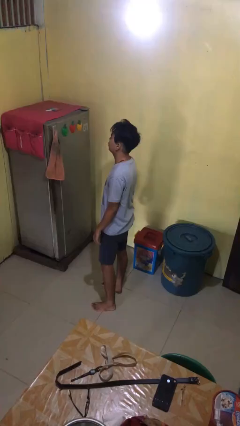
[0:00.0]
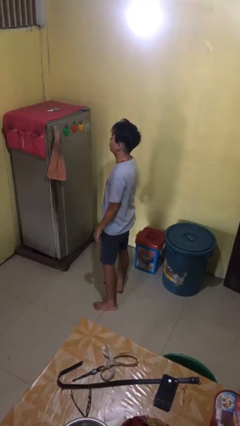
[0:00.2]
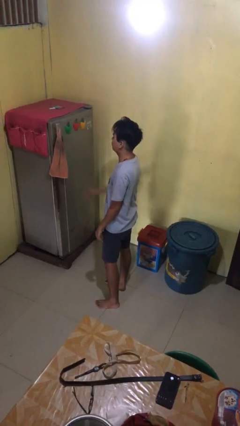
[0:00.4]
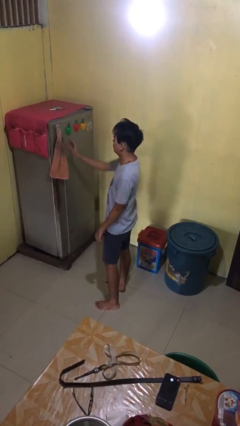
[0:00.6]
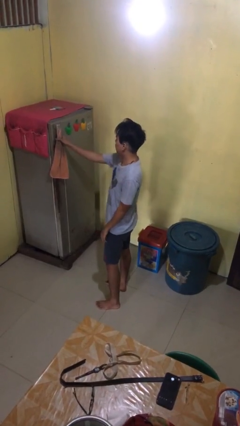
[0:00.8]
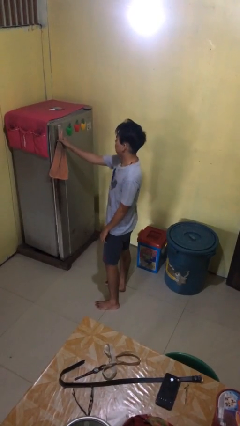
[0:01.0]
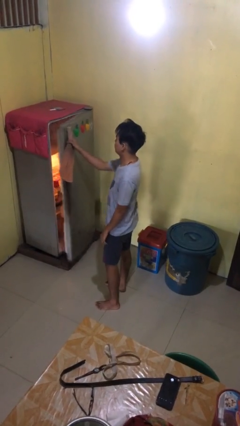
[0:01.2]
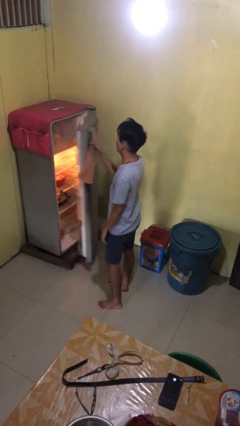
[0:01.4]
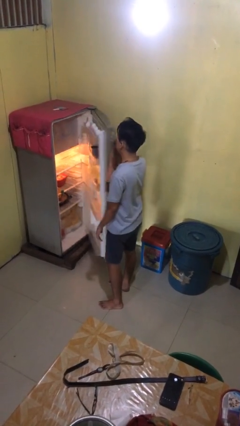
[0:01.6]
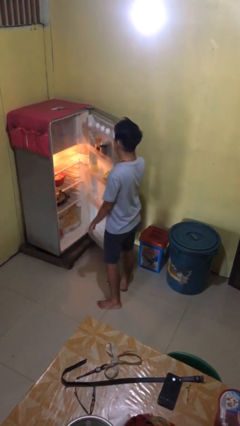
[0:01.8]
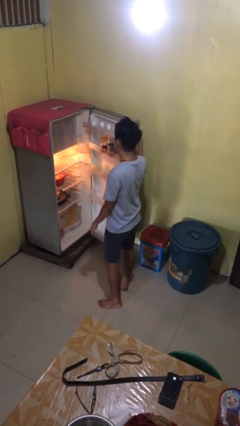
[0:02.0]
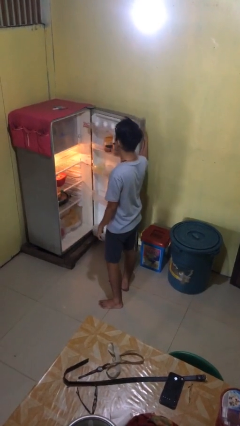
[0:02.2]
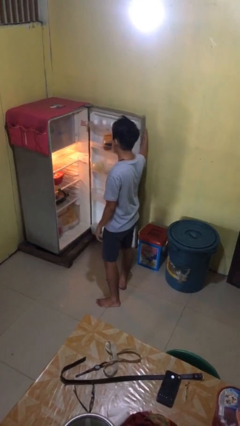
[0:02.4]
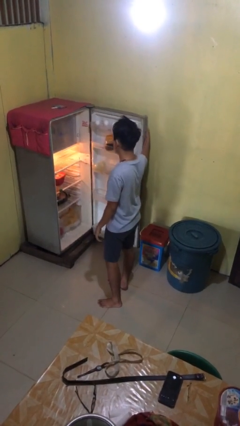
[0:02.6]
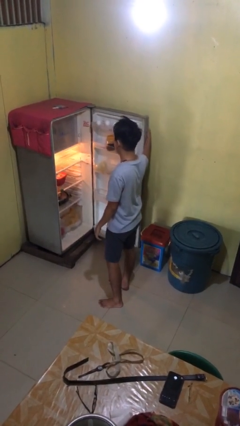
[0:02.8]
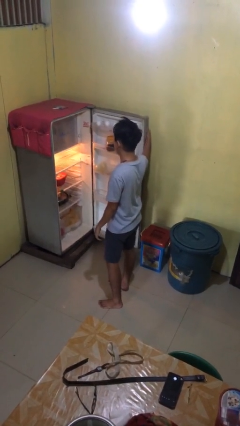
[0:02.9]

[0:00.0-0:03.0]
person opens refrigerator

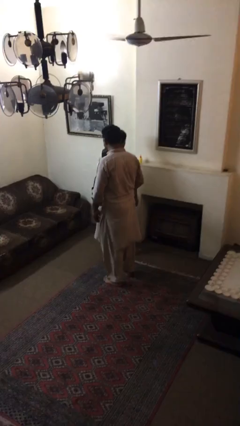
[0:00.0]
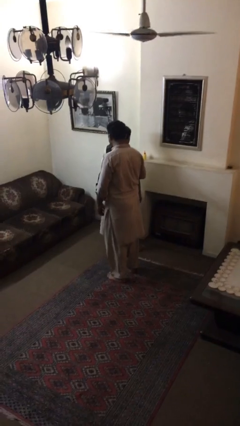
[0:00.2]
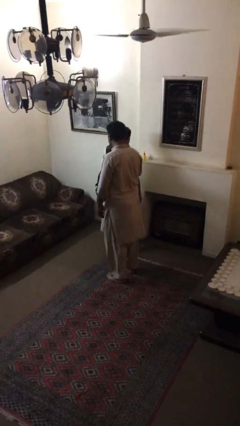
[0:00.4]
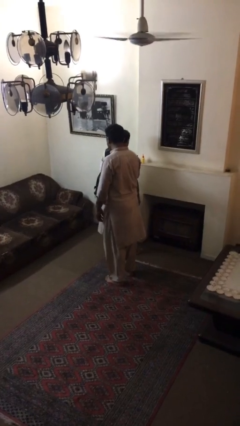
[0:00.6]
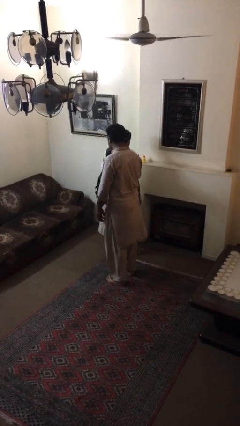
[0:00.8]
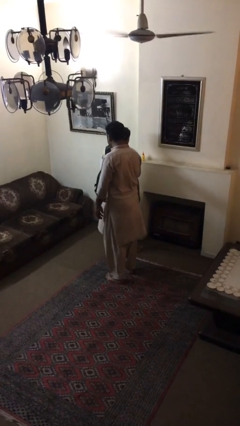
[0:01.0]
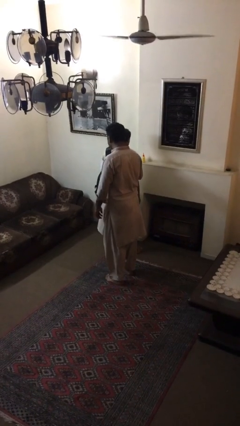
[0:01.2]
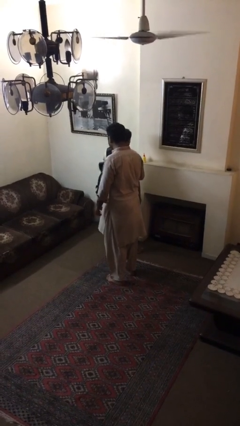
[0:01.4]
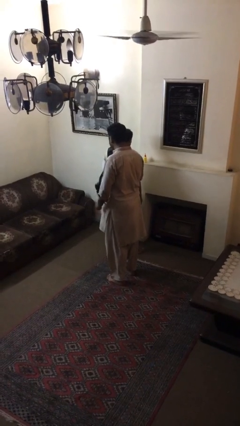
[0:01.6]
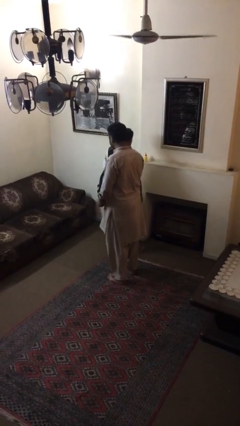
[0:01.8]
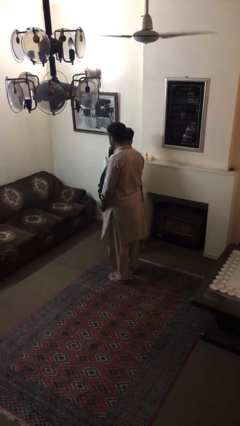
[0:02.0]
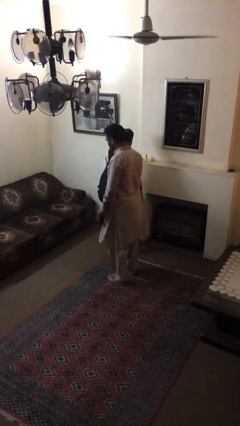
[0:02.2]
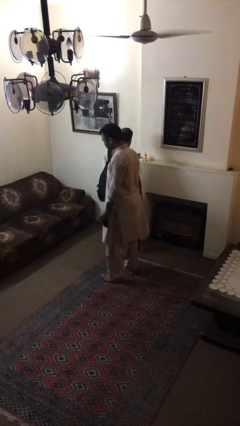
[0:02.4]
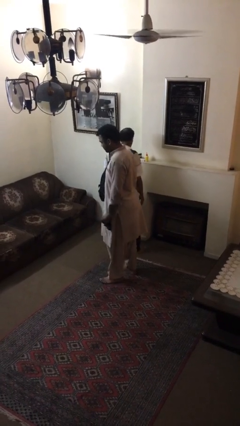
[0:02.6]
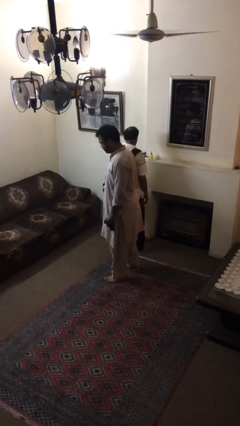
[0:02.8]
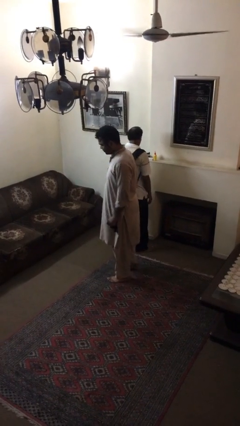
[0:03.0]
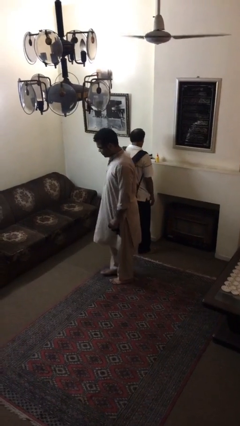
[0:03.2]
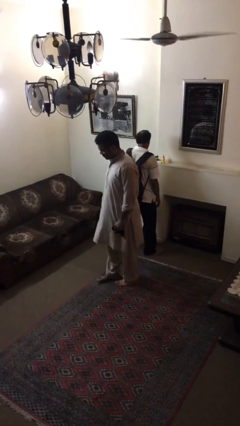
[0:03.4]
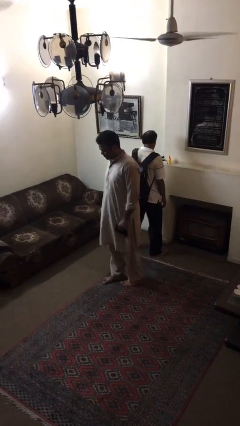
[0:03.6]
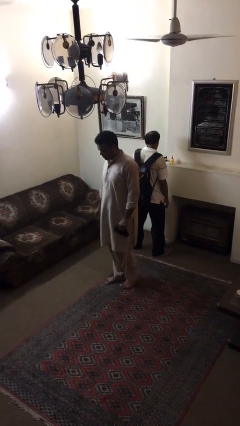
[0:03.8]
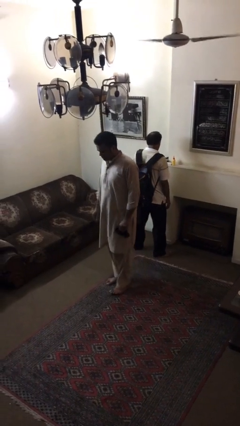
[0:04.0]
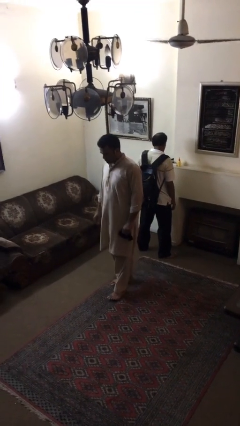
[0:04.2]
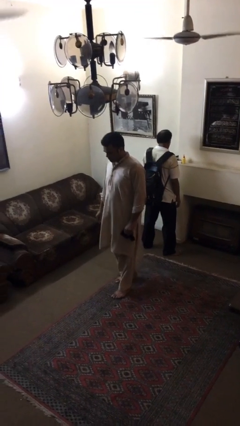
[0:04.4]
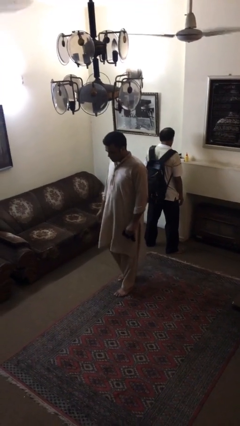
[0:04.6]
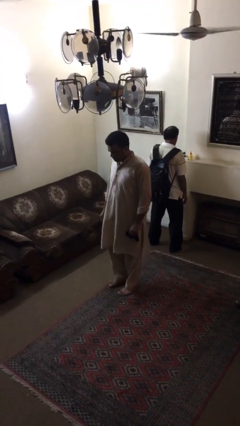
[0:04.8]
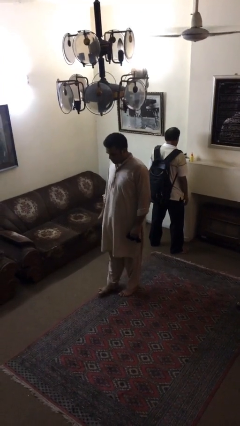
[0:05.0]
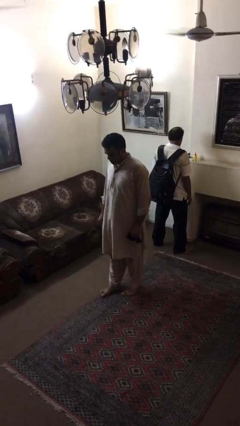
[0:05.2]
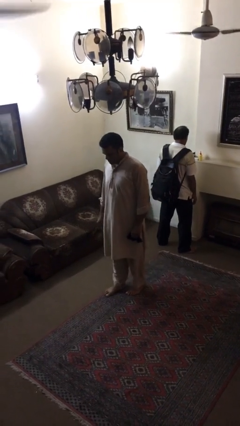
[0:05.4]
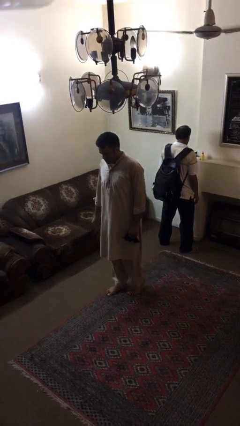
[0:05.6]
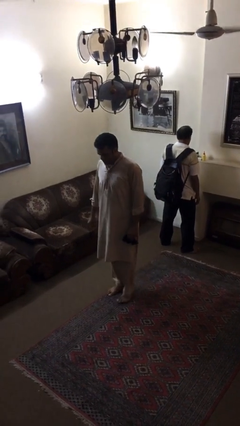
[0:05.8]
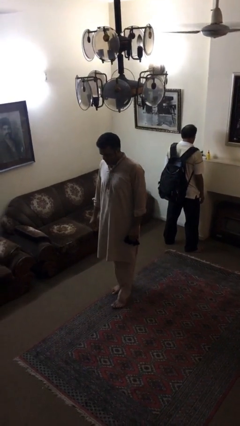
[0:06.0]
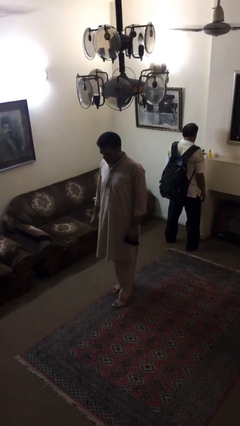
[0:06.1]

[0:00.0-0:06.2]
person steals object from person

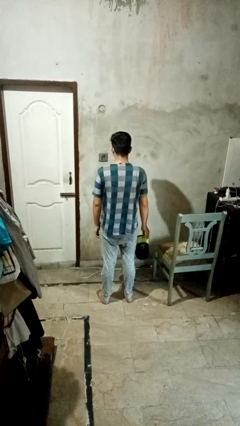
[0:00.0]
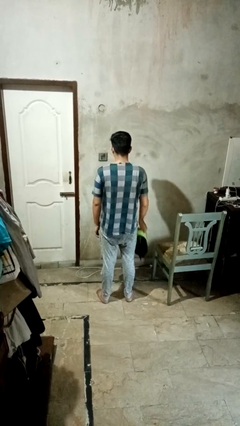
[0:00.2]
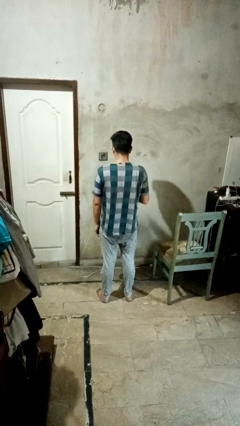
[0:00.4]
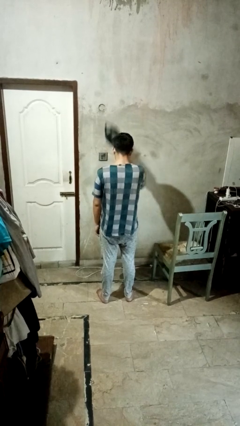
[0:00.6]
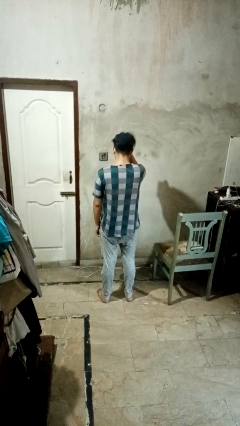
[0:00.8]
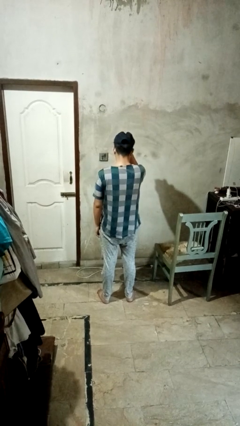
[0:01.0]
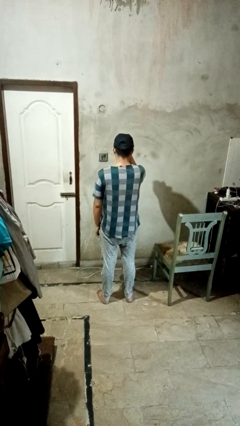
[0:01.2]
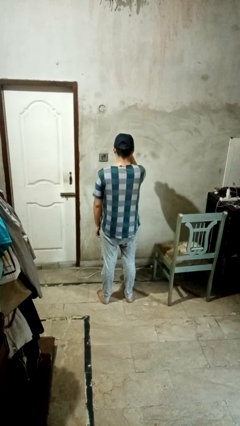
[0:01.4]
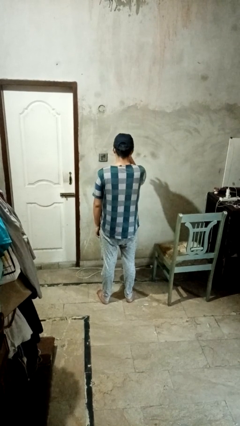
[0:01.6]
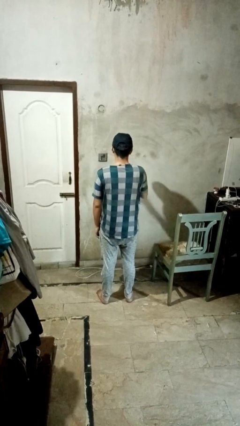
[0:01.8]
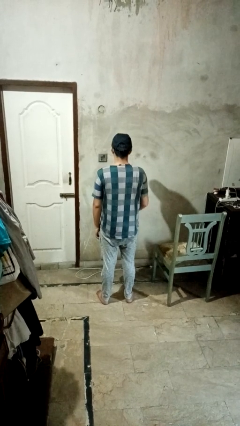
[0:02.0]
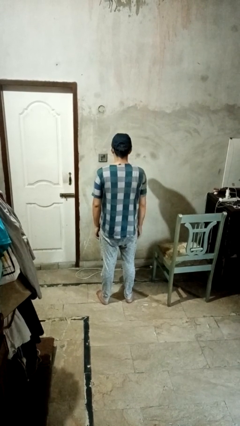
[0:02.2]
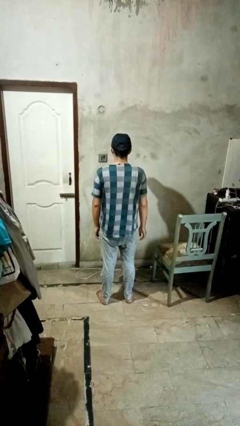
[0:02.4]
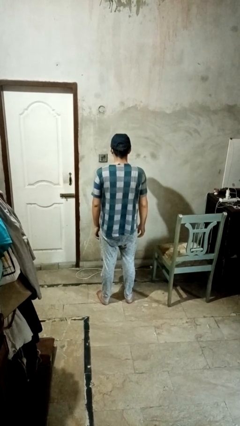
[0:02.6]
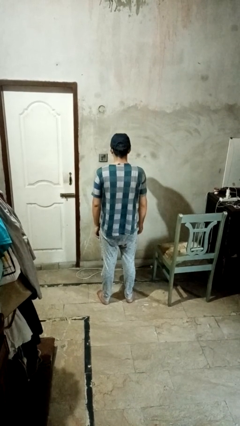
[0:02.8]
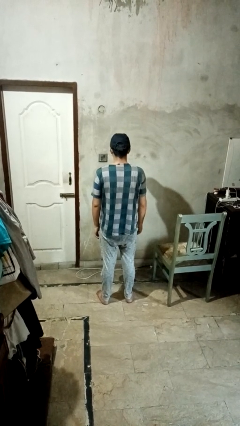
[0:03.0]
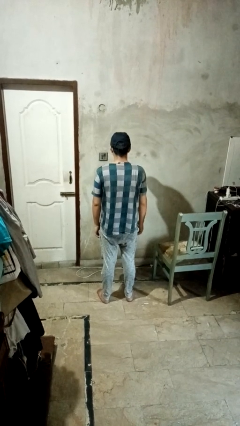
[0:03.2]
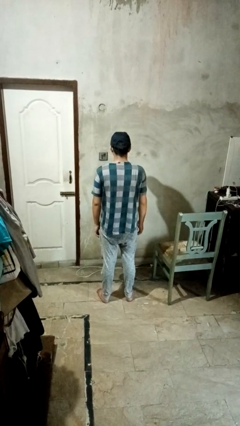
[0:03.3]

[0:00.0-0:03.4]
person puts on hat

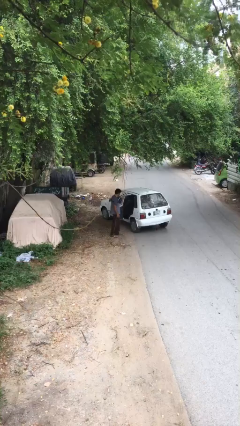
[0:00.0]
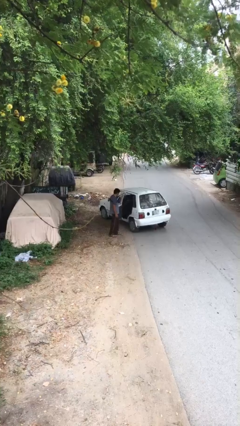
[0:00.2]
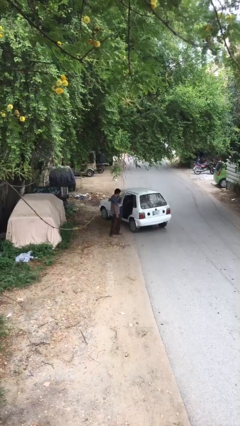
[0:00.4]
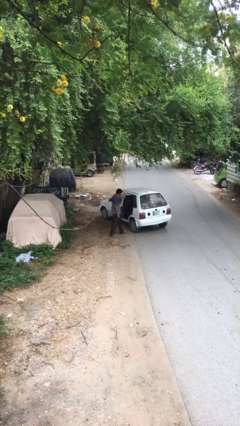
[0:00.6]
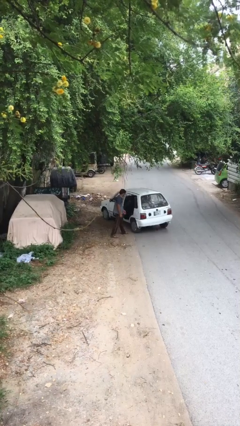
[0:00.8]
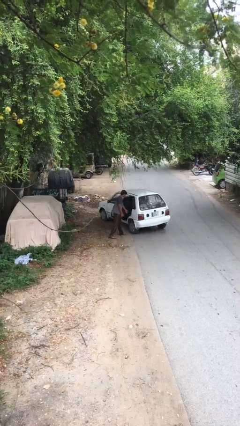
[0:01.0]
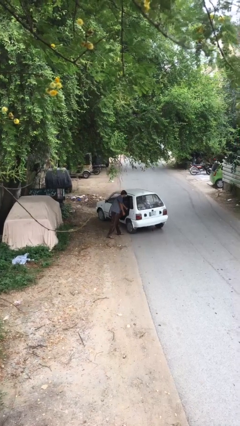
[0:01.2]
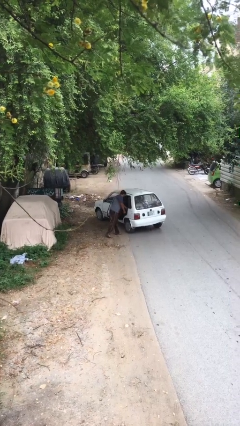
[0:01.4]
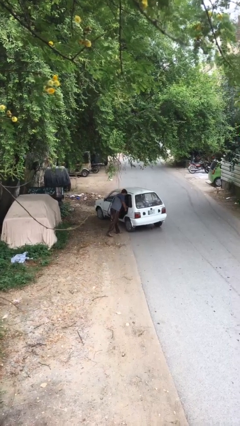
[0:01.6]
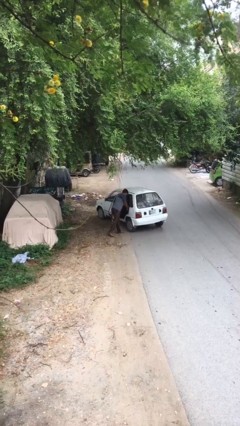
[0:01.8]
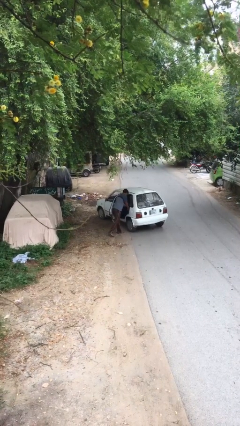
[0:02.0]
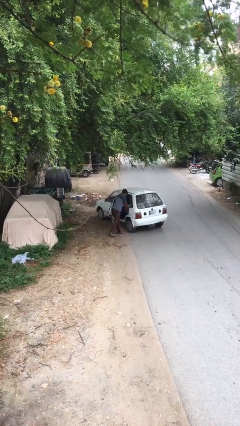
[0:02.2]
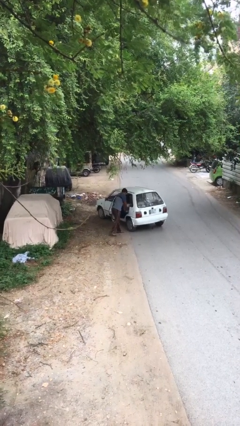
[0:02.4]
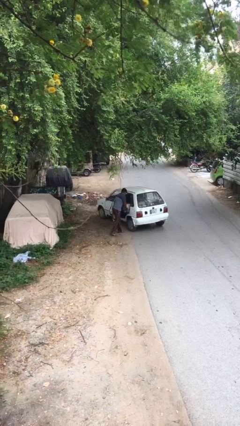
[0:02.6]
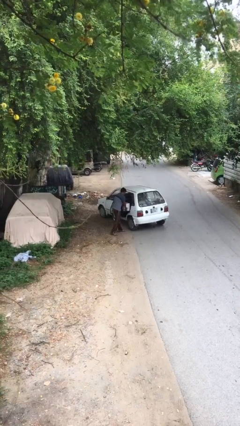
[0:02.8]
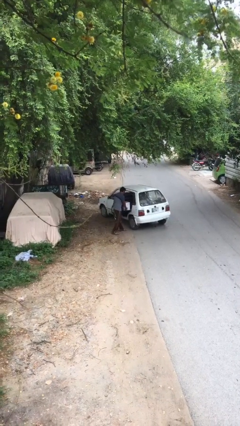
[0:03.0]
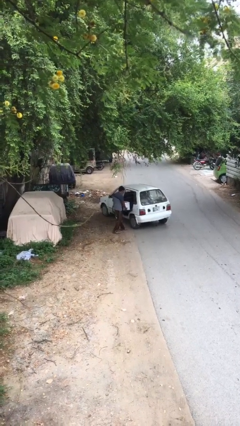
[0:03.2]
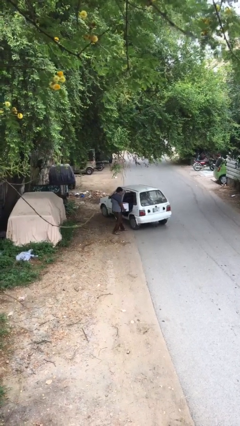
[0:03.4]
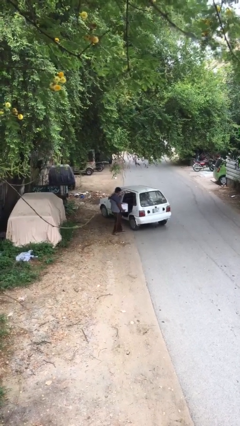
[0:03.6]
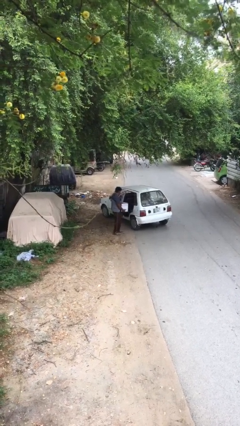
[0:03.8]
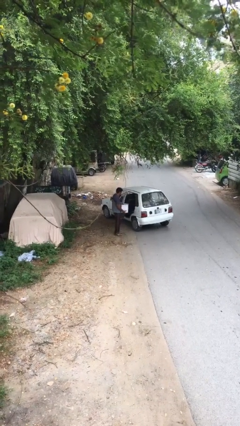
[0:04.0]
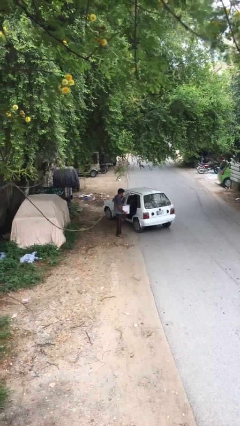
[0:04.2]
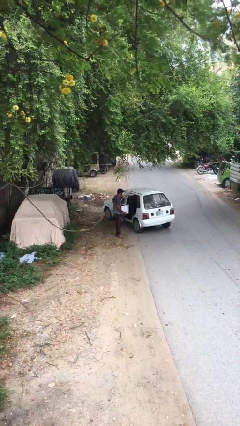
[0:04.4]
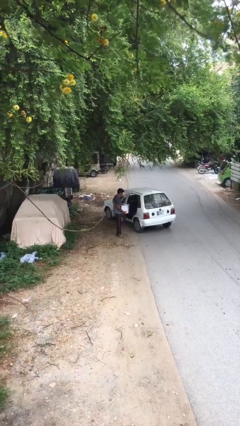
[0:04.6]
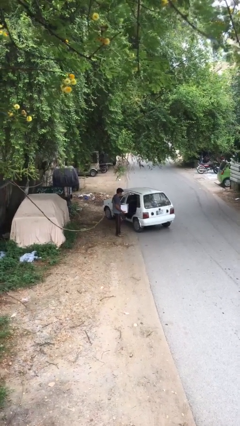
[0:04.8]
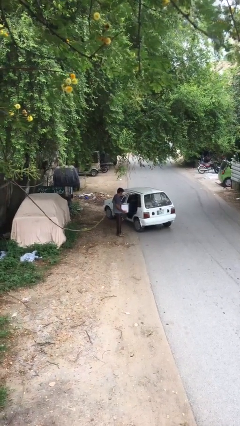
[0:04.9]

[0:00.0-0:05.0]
person unloads car

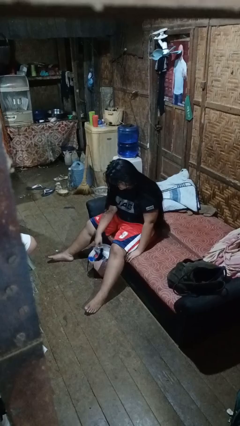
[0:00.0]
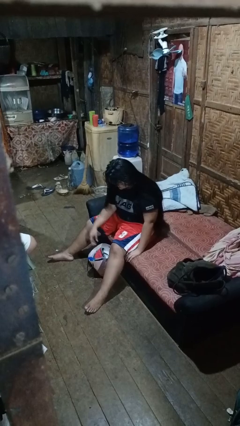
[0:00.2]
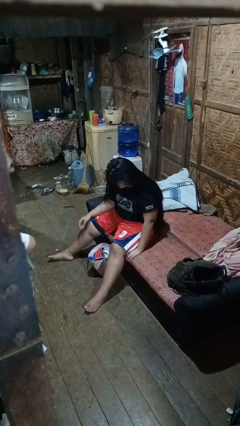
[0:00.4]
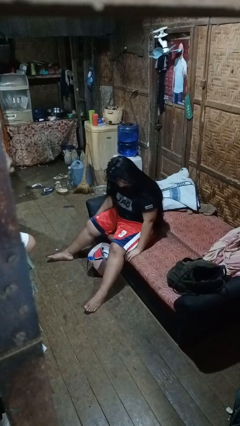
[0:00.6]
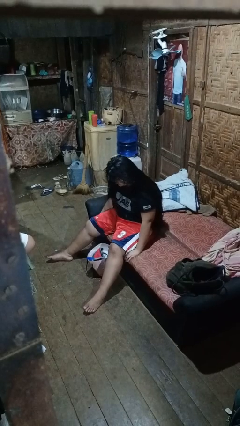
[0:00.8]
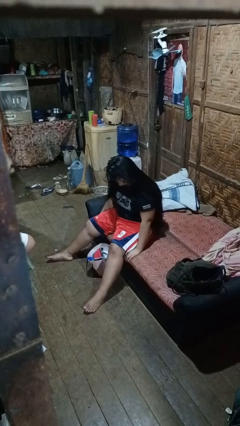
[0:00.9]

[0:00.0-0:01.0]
person puts object into bag
